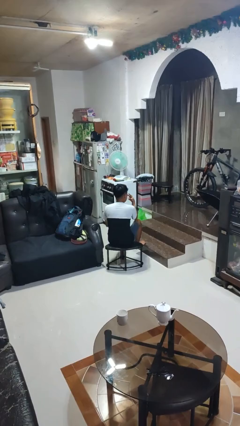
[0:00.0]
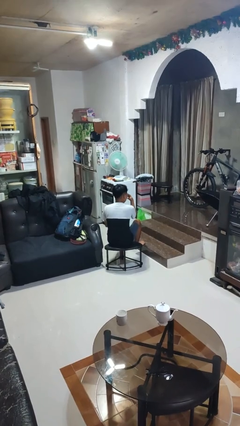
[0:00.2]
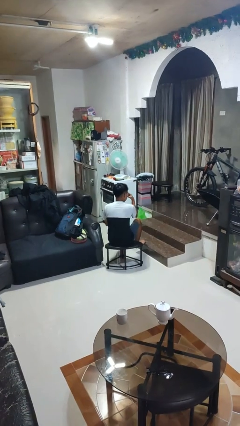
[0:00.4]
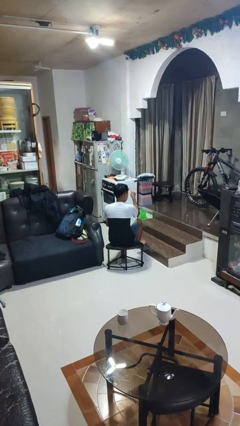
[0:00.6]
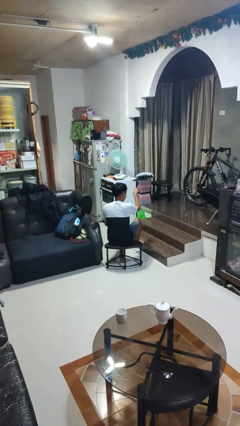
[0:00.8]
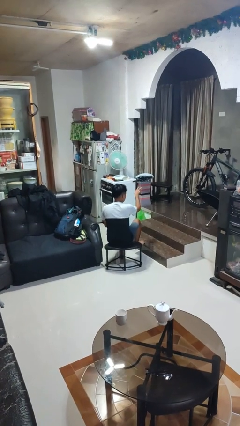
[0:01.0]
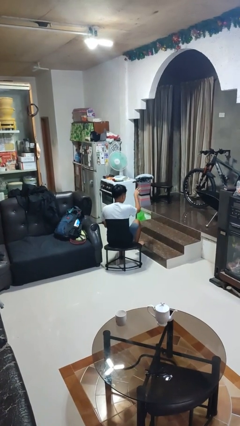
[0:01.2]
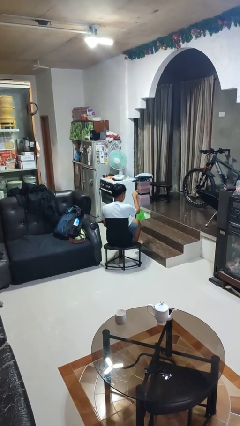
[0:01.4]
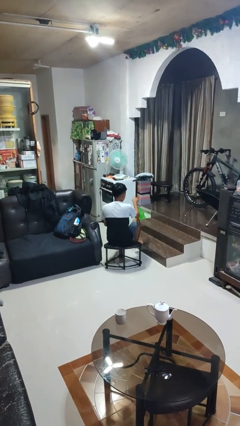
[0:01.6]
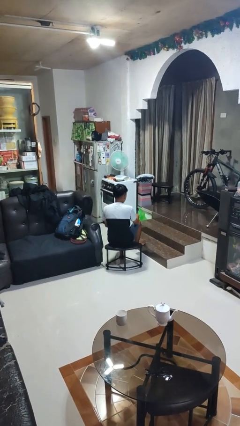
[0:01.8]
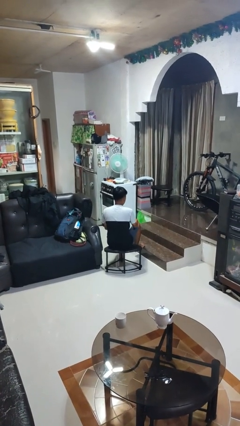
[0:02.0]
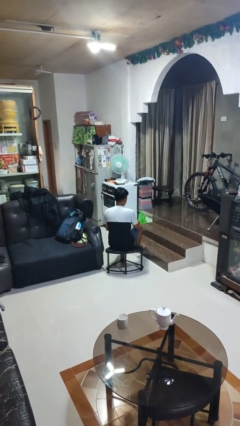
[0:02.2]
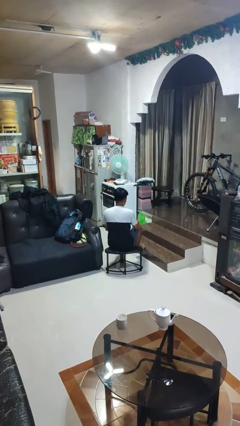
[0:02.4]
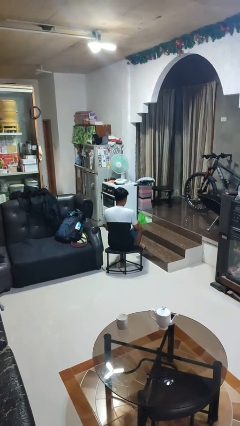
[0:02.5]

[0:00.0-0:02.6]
person gestures watch closely

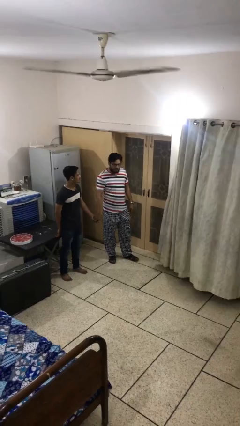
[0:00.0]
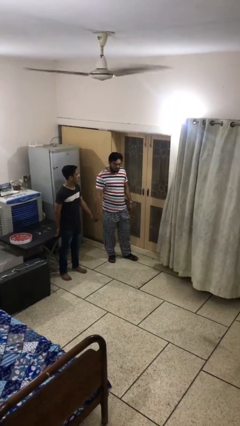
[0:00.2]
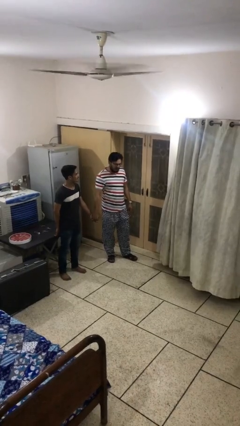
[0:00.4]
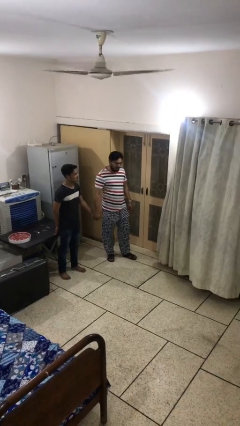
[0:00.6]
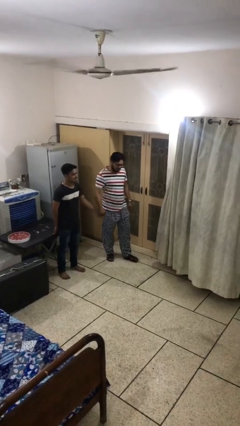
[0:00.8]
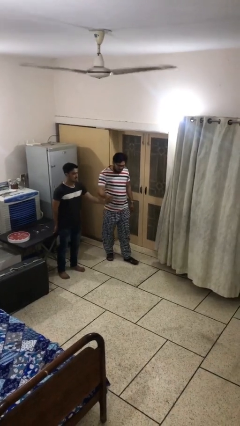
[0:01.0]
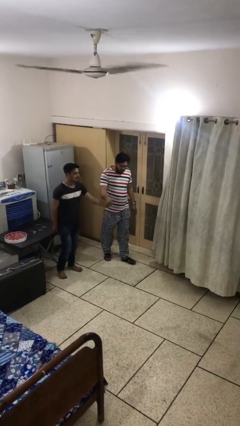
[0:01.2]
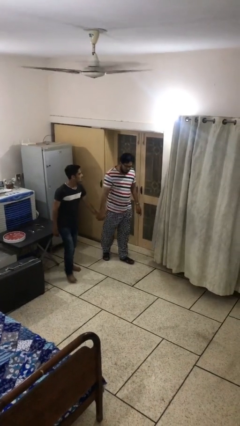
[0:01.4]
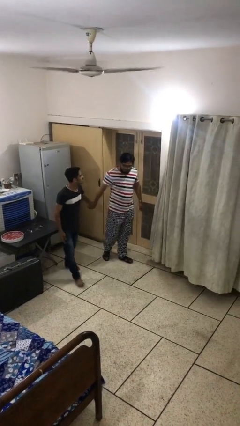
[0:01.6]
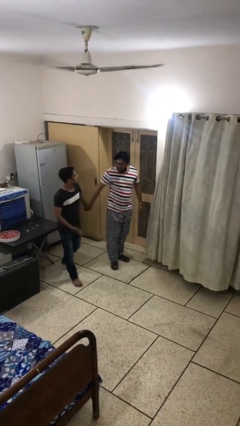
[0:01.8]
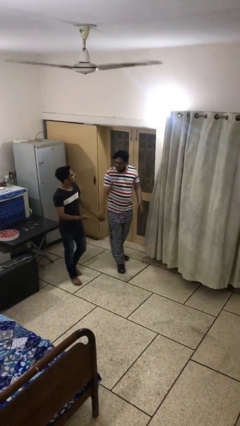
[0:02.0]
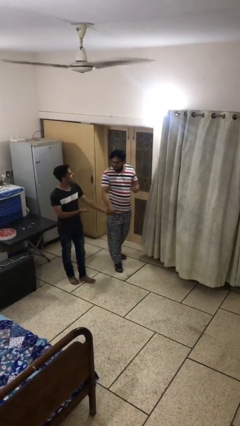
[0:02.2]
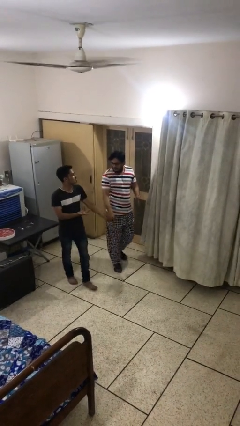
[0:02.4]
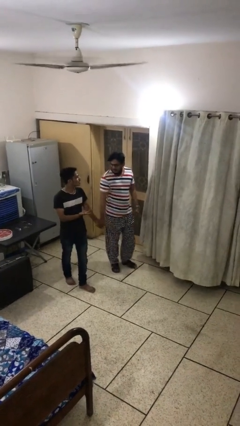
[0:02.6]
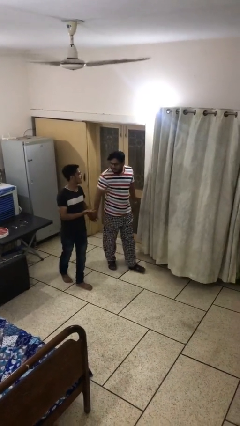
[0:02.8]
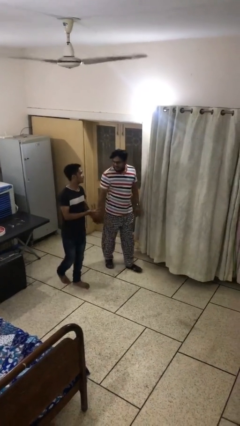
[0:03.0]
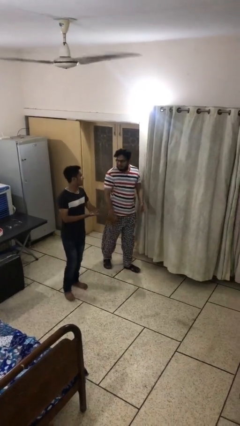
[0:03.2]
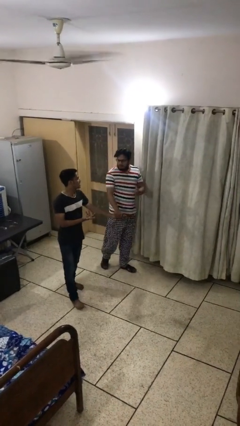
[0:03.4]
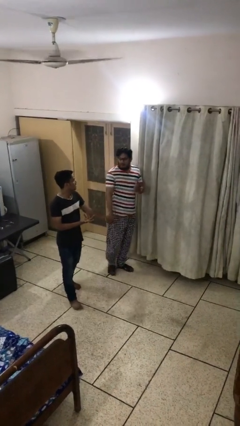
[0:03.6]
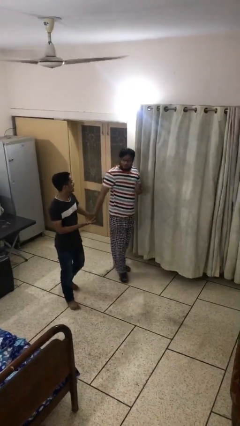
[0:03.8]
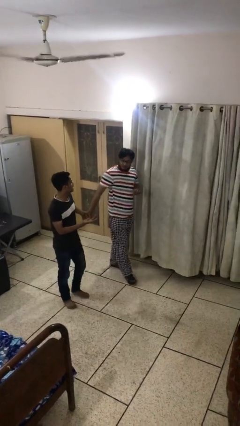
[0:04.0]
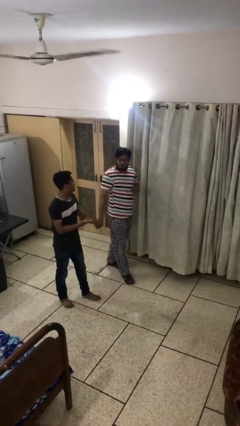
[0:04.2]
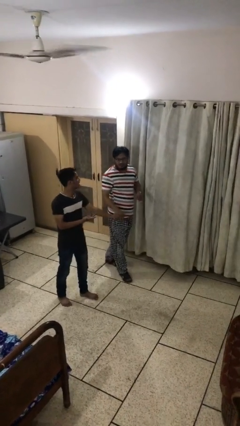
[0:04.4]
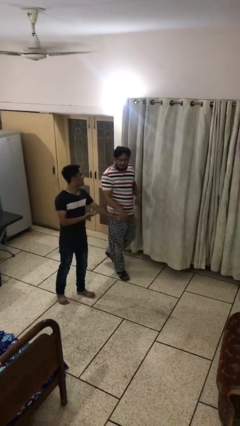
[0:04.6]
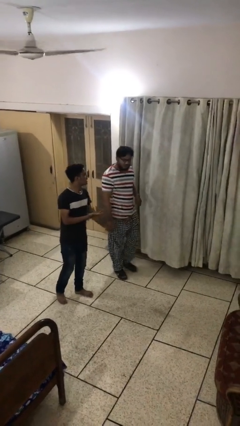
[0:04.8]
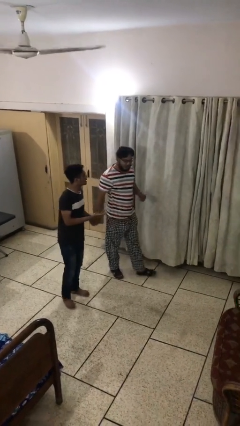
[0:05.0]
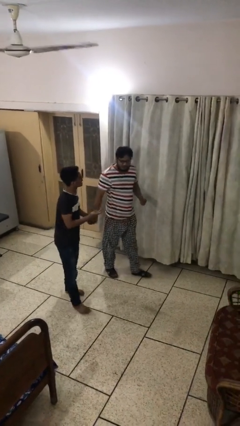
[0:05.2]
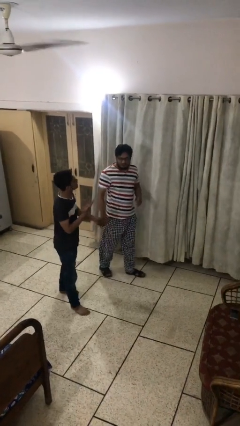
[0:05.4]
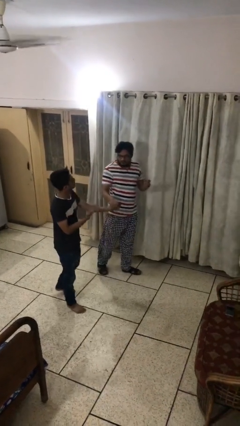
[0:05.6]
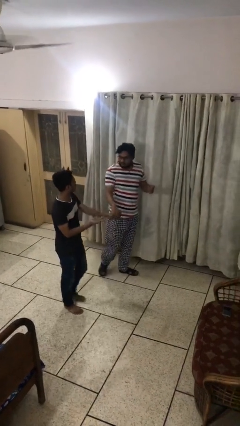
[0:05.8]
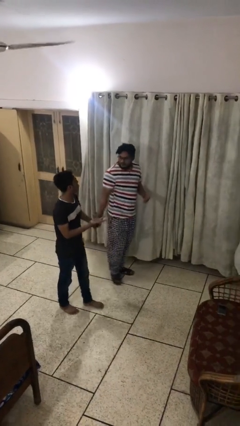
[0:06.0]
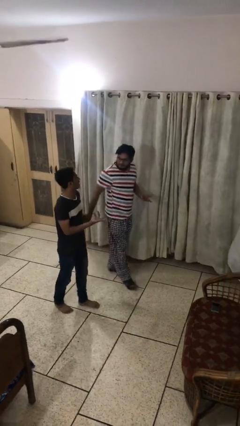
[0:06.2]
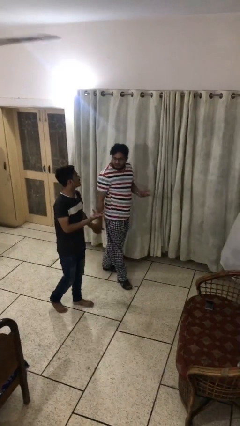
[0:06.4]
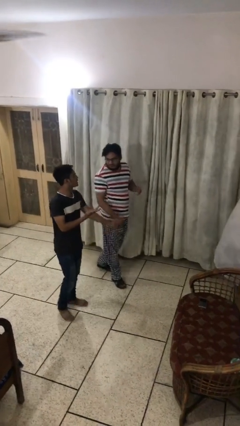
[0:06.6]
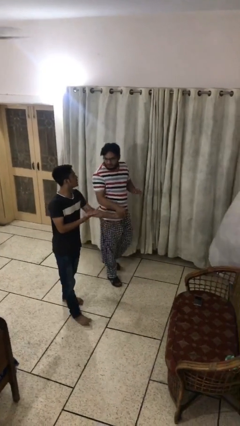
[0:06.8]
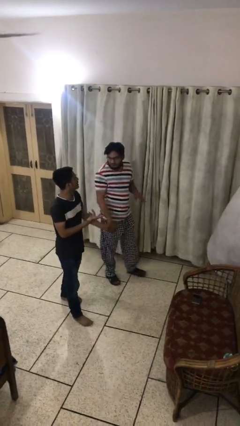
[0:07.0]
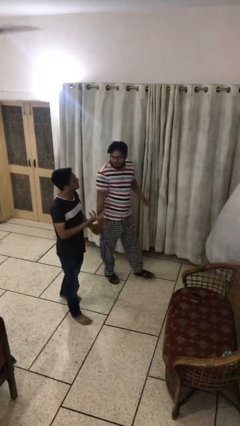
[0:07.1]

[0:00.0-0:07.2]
person holds hand

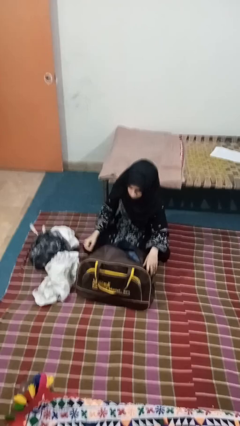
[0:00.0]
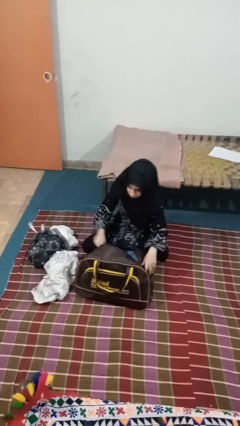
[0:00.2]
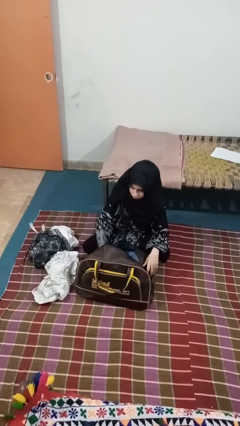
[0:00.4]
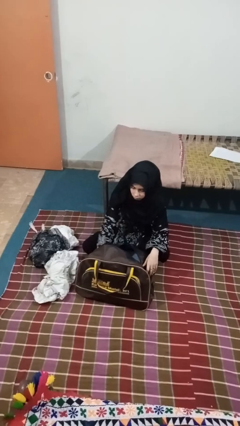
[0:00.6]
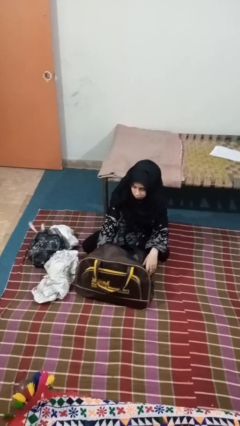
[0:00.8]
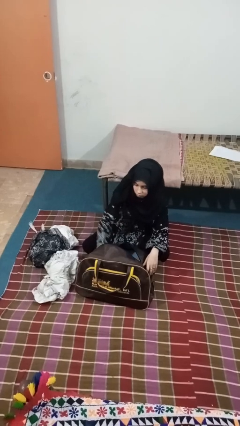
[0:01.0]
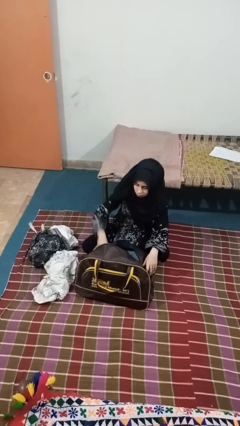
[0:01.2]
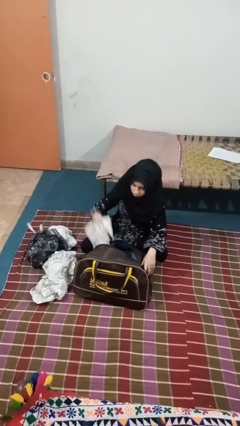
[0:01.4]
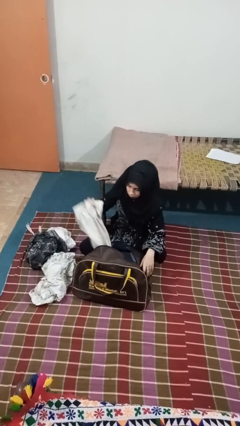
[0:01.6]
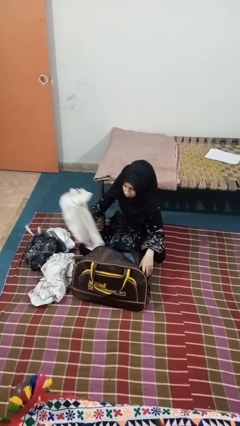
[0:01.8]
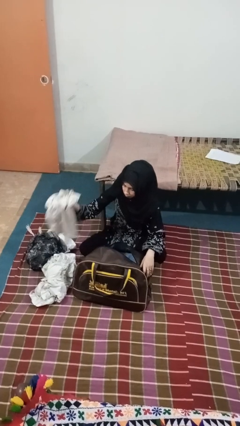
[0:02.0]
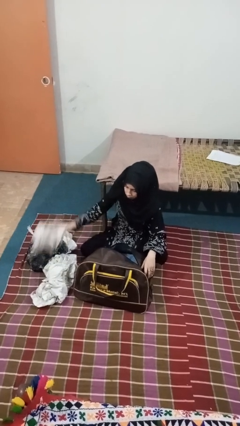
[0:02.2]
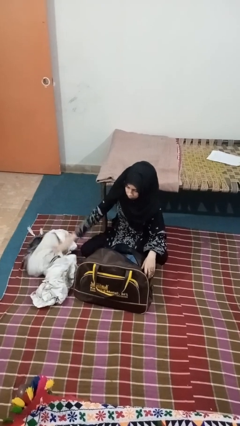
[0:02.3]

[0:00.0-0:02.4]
person unloads clothes from suitcase

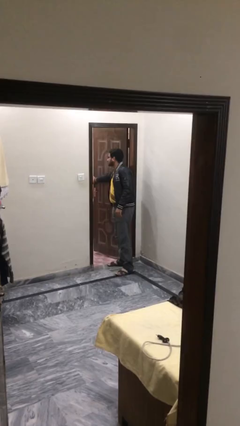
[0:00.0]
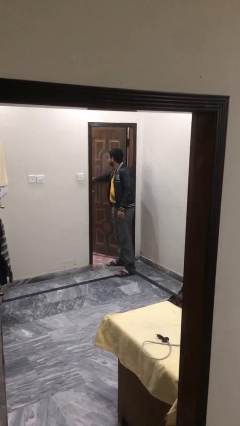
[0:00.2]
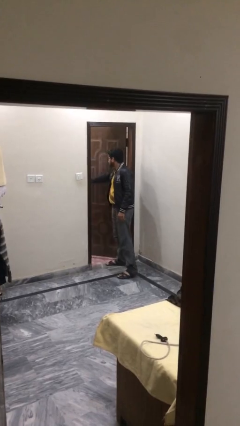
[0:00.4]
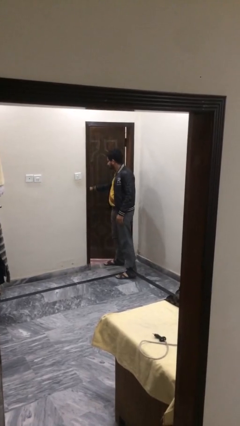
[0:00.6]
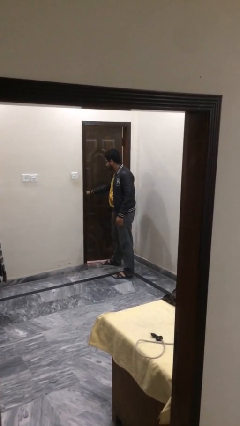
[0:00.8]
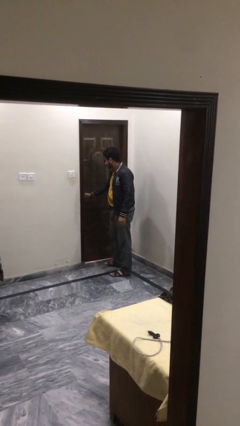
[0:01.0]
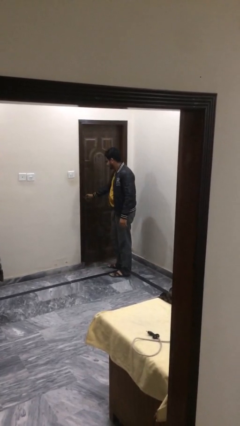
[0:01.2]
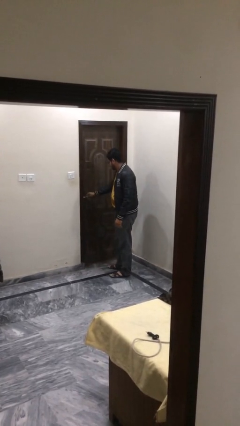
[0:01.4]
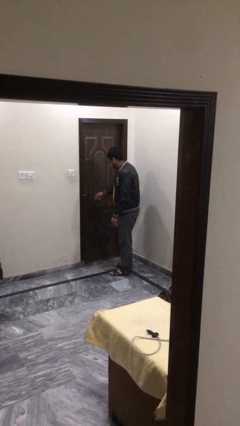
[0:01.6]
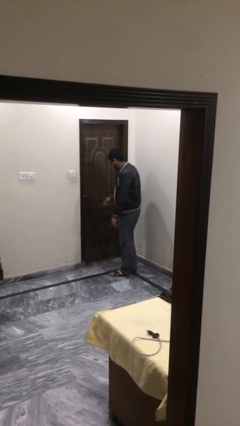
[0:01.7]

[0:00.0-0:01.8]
person closes facility door

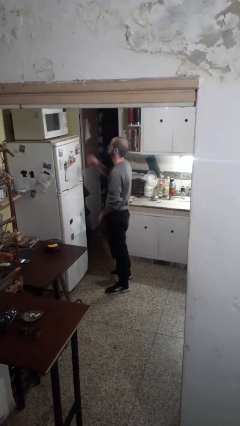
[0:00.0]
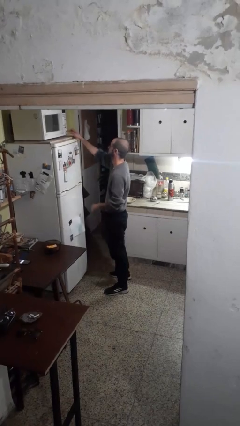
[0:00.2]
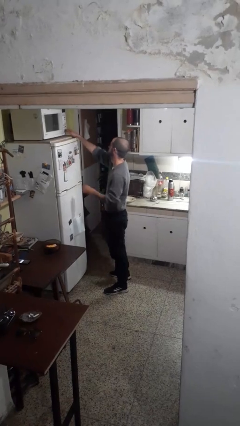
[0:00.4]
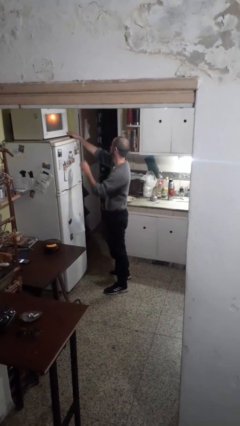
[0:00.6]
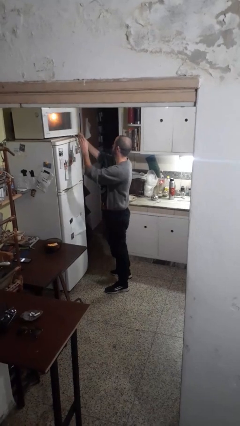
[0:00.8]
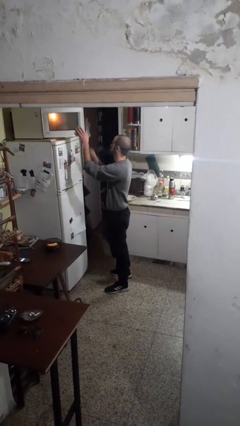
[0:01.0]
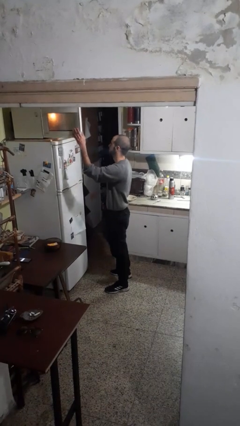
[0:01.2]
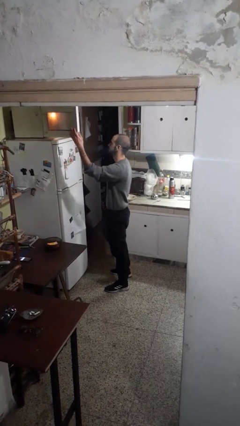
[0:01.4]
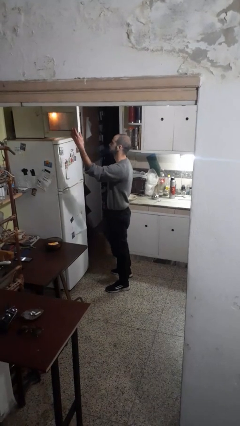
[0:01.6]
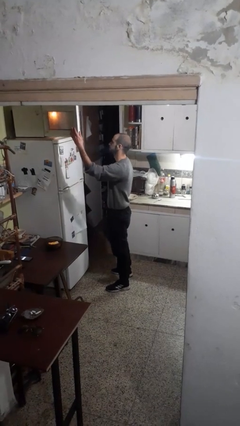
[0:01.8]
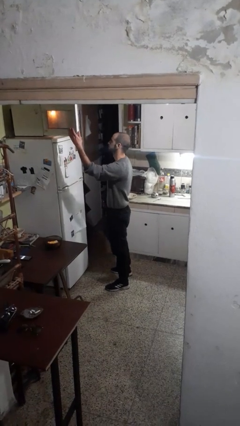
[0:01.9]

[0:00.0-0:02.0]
person opens microwave

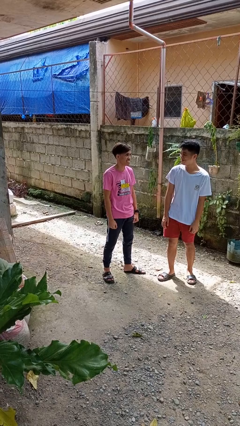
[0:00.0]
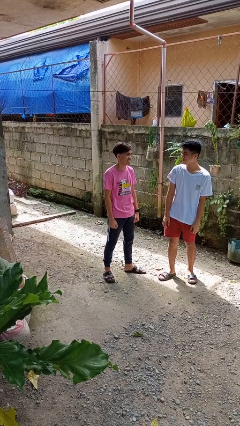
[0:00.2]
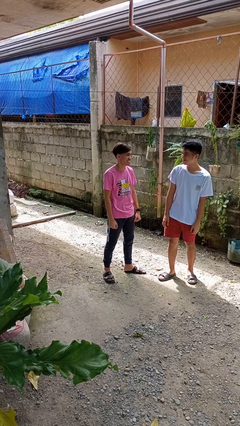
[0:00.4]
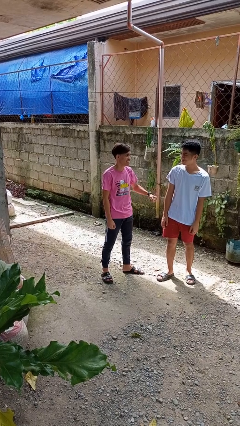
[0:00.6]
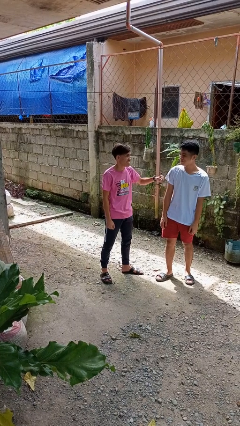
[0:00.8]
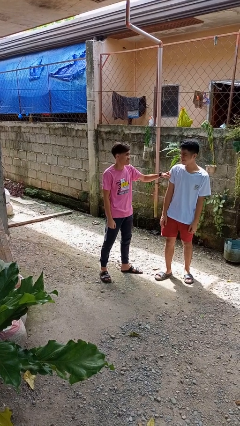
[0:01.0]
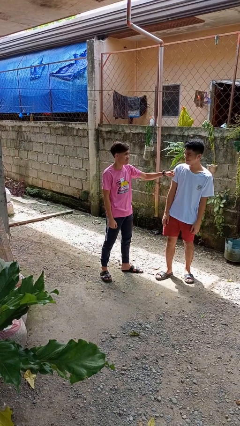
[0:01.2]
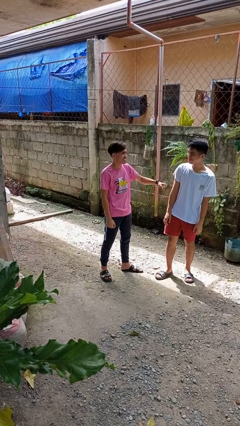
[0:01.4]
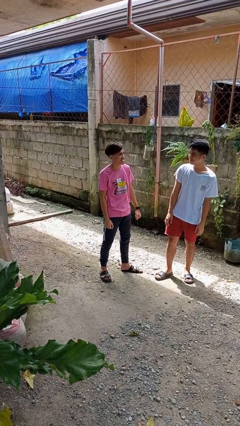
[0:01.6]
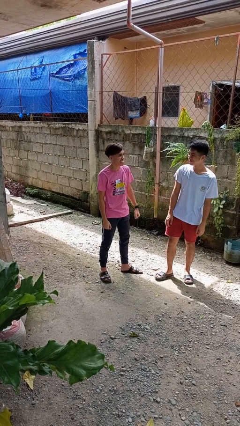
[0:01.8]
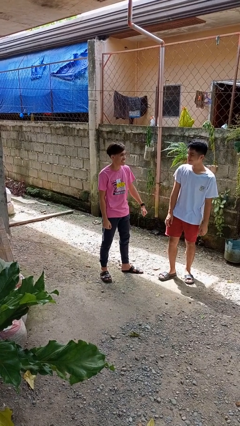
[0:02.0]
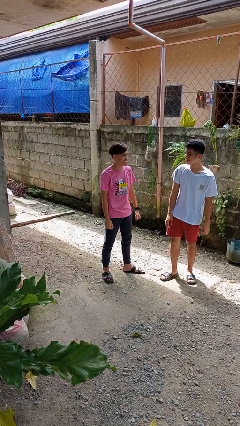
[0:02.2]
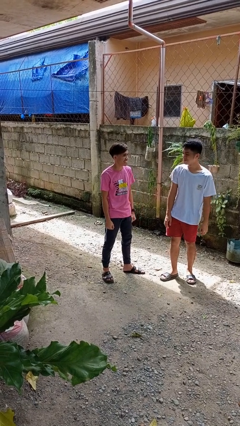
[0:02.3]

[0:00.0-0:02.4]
person pounds shoulders of person
